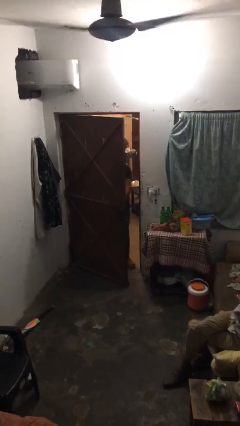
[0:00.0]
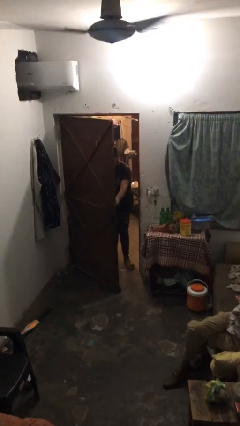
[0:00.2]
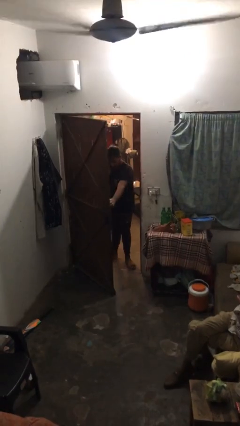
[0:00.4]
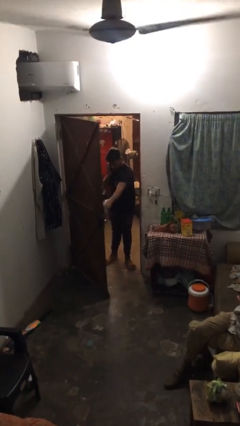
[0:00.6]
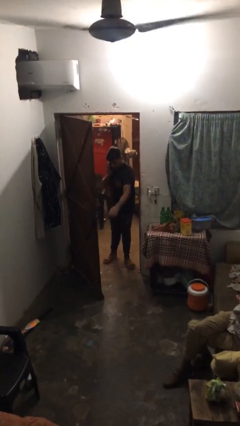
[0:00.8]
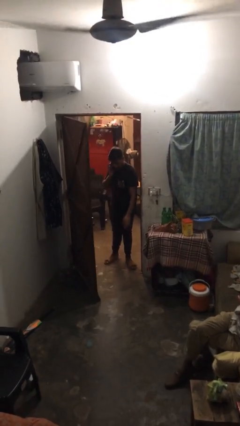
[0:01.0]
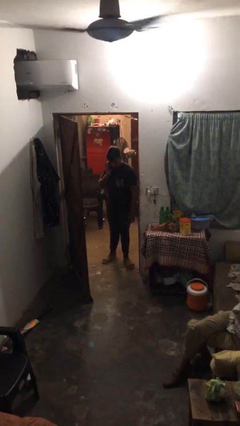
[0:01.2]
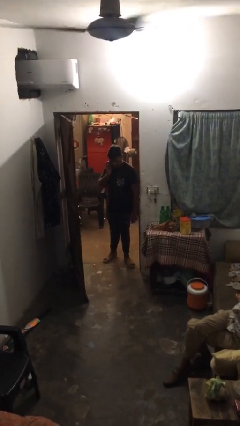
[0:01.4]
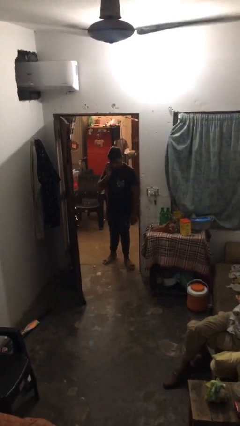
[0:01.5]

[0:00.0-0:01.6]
person opens facility door

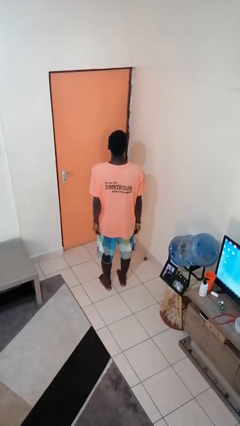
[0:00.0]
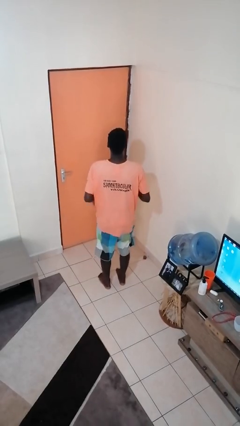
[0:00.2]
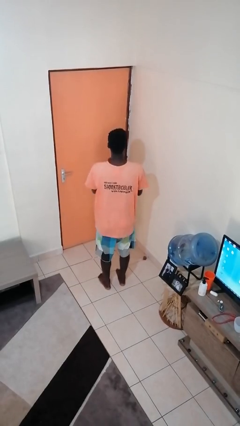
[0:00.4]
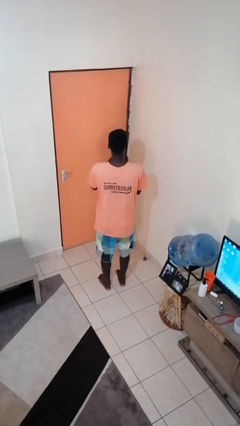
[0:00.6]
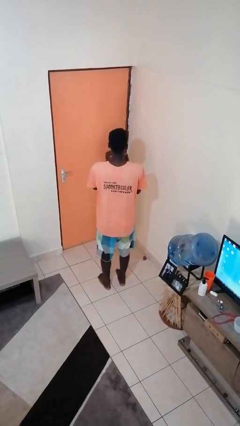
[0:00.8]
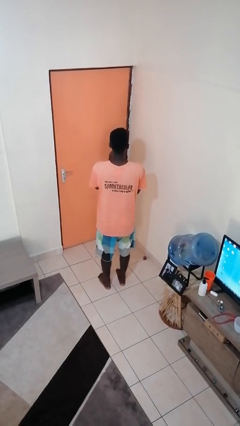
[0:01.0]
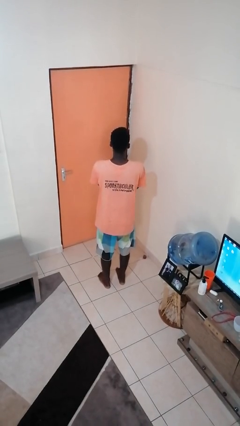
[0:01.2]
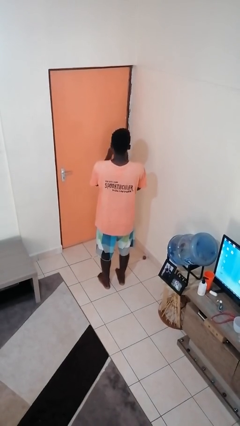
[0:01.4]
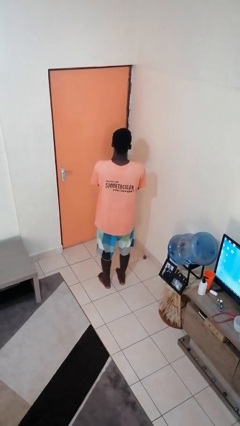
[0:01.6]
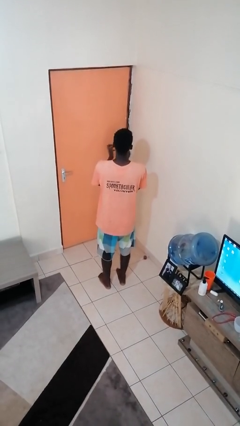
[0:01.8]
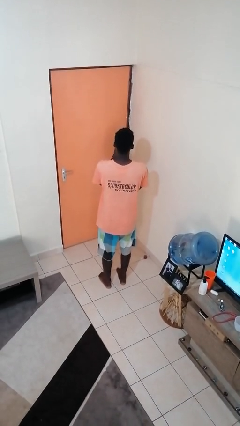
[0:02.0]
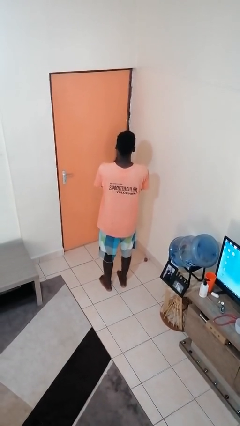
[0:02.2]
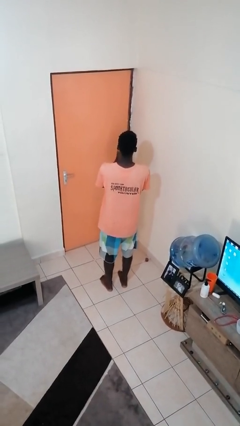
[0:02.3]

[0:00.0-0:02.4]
person claps hands

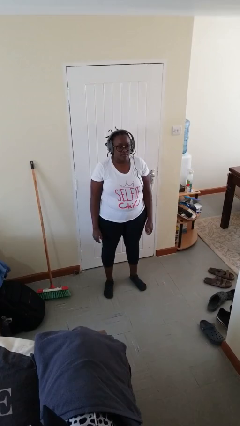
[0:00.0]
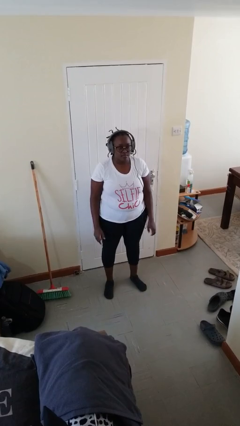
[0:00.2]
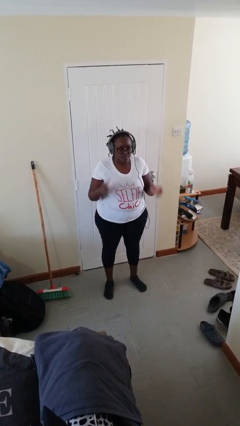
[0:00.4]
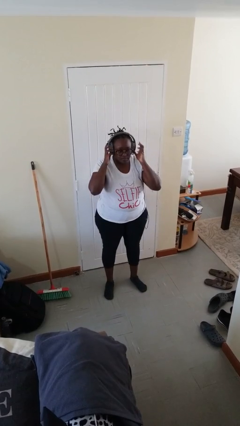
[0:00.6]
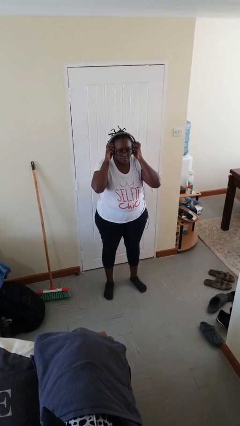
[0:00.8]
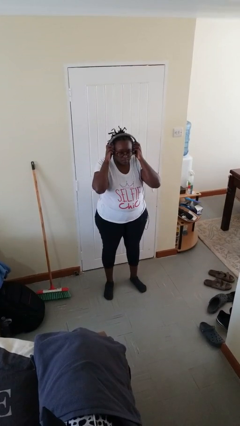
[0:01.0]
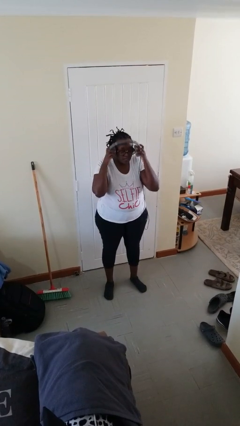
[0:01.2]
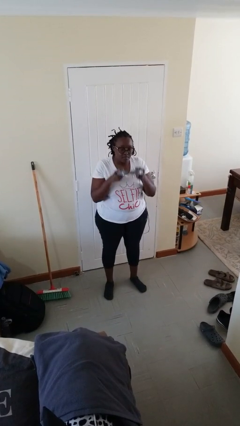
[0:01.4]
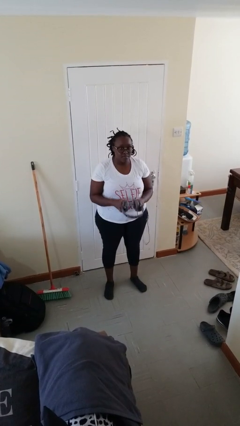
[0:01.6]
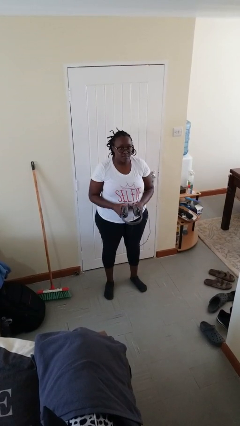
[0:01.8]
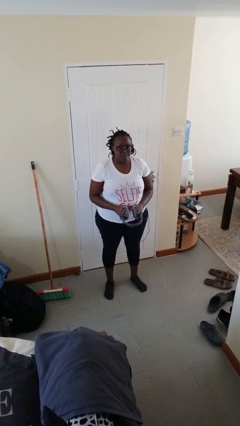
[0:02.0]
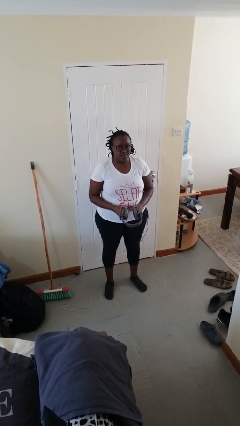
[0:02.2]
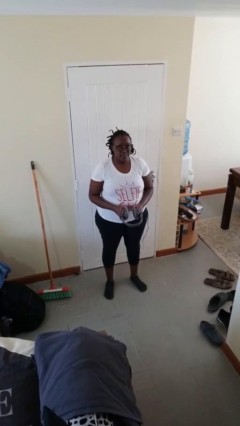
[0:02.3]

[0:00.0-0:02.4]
person takes off headphones

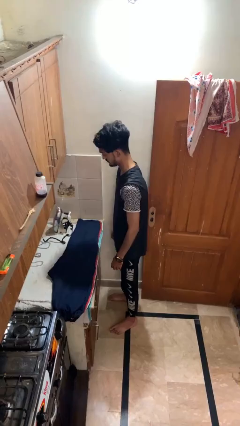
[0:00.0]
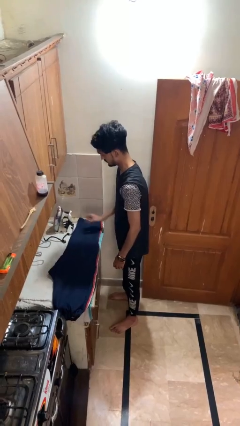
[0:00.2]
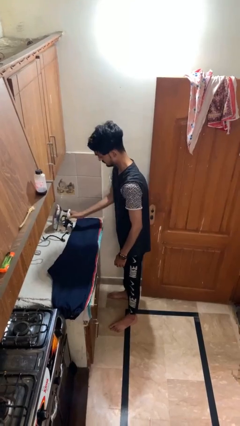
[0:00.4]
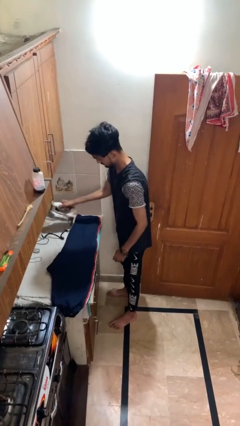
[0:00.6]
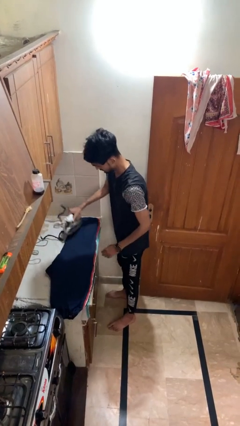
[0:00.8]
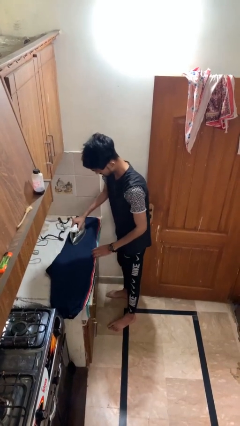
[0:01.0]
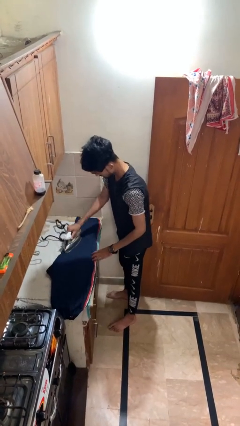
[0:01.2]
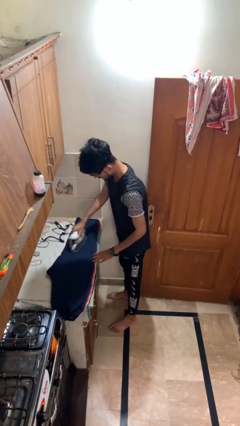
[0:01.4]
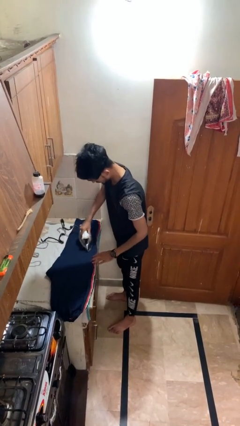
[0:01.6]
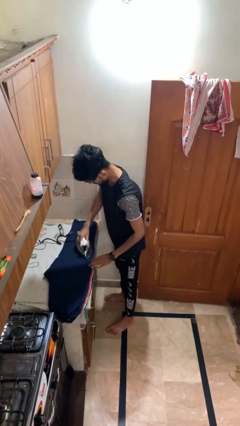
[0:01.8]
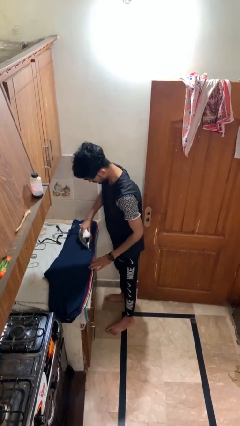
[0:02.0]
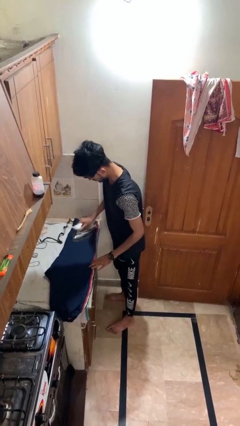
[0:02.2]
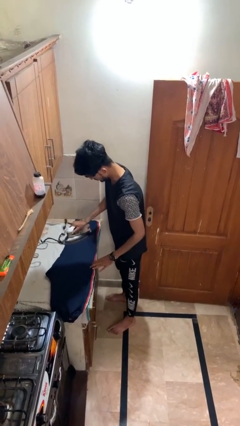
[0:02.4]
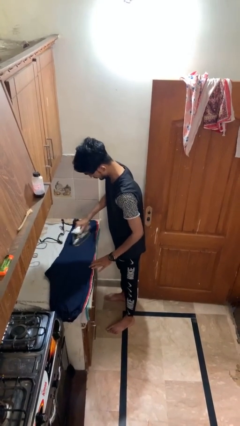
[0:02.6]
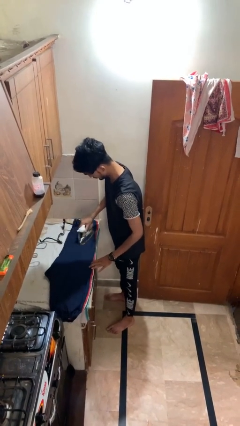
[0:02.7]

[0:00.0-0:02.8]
person irons clothes

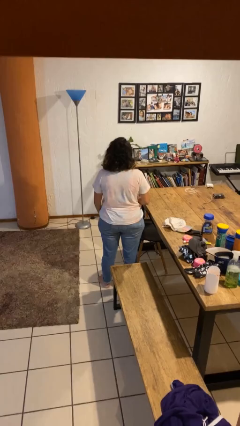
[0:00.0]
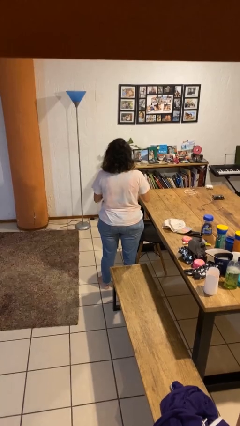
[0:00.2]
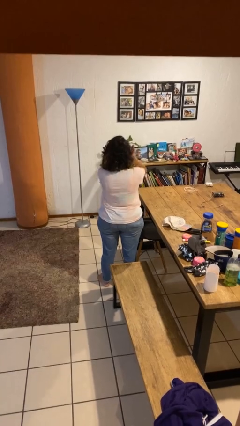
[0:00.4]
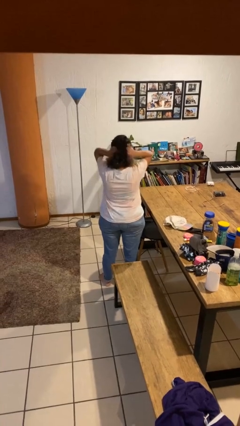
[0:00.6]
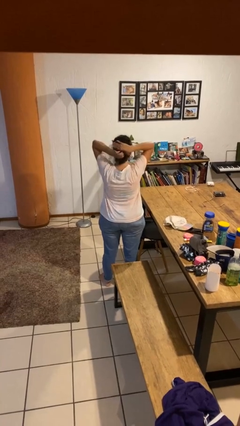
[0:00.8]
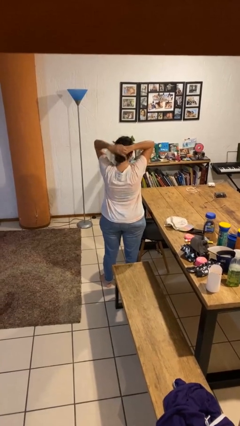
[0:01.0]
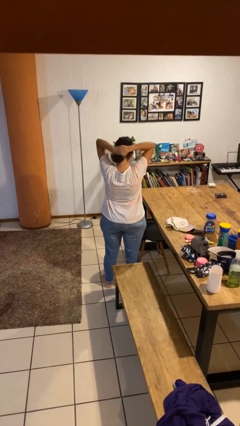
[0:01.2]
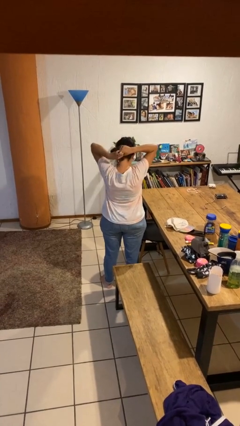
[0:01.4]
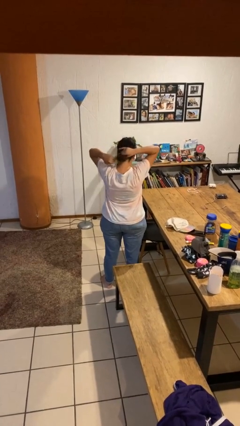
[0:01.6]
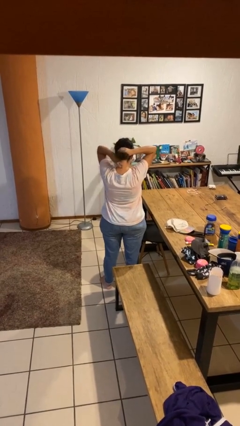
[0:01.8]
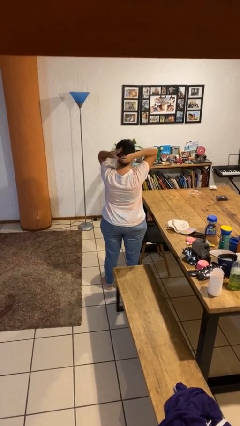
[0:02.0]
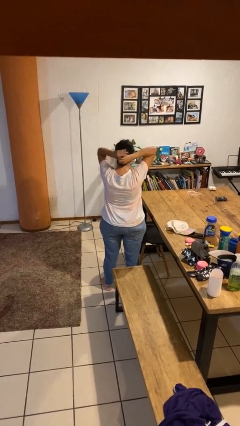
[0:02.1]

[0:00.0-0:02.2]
person puts hair in ponytail

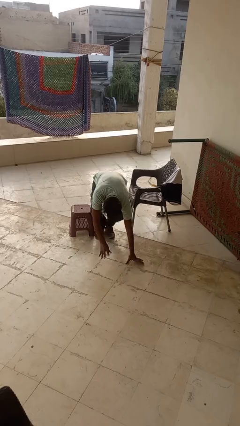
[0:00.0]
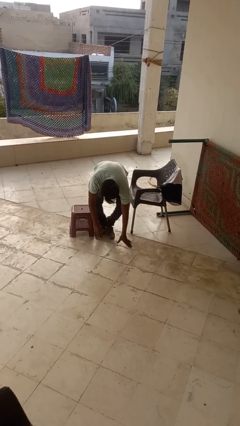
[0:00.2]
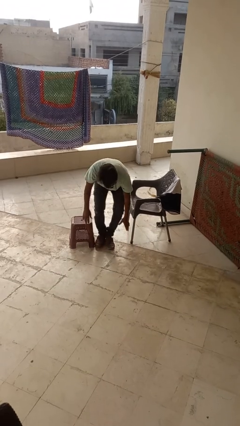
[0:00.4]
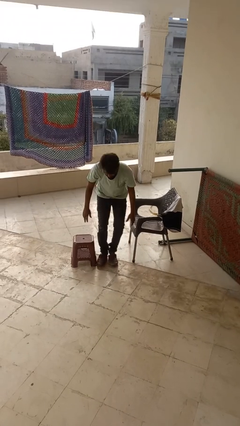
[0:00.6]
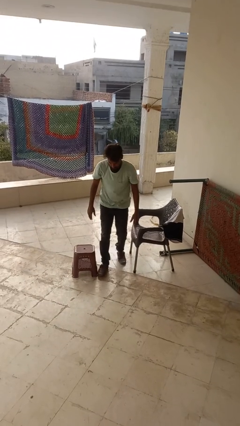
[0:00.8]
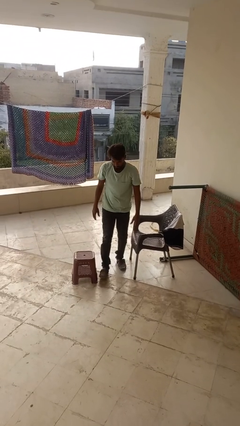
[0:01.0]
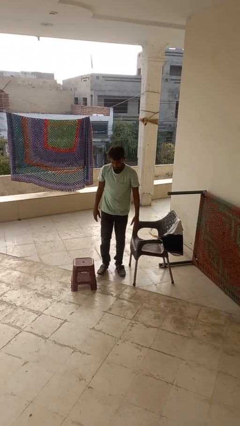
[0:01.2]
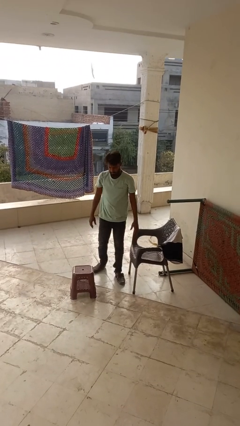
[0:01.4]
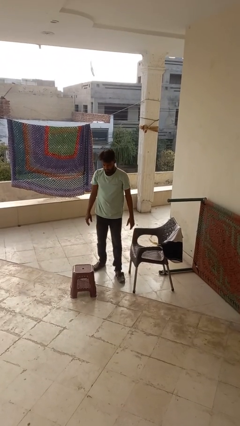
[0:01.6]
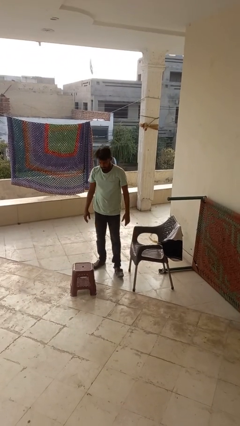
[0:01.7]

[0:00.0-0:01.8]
person stands up from floor

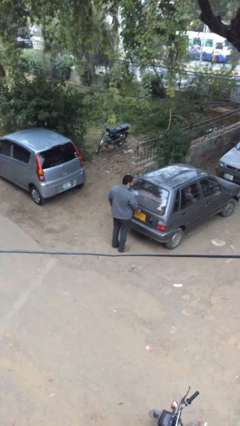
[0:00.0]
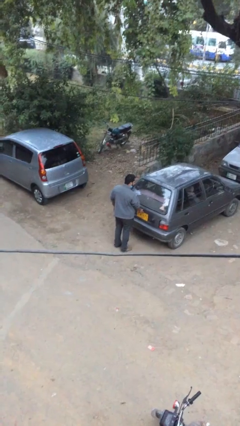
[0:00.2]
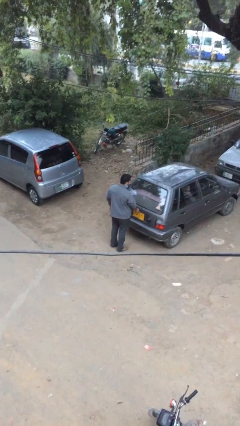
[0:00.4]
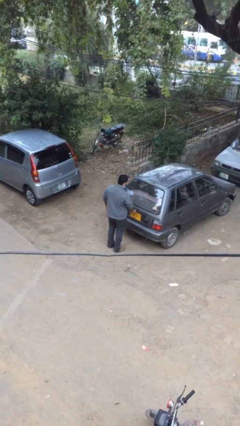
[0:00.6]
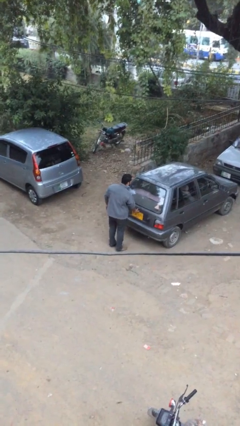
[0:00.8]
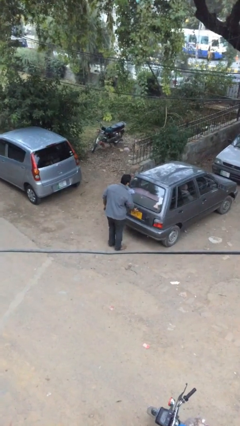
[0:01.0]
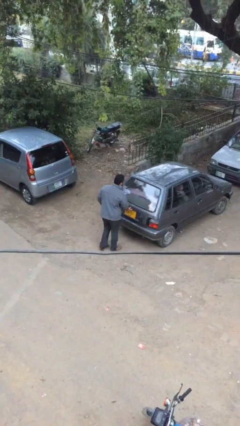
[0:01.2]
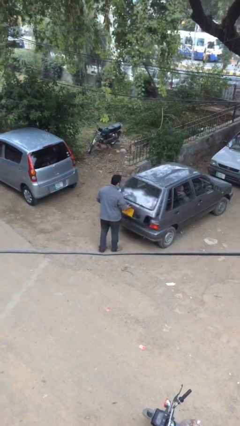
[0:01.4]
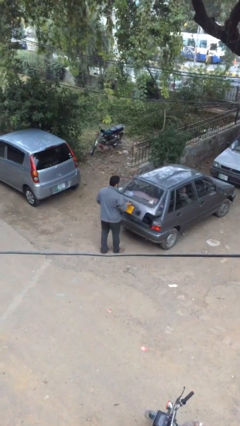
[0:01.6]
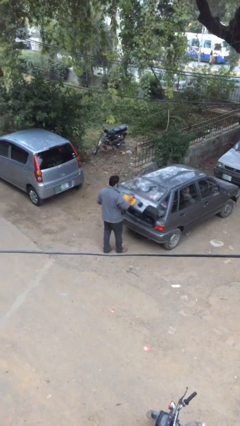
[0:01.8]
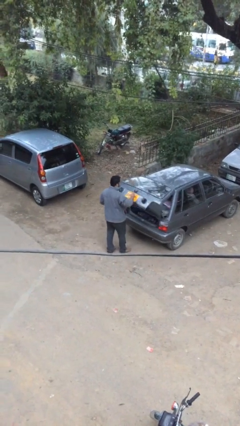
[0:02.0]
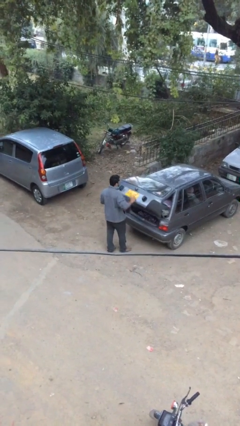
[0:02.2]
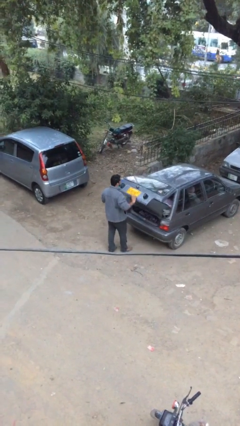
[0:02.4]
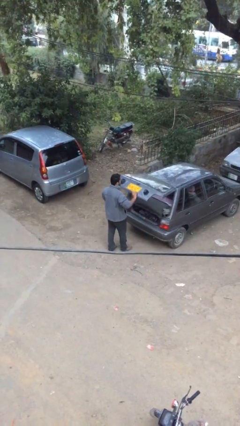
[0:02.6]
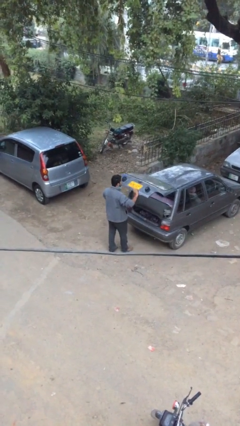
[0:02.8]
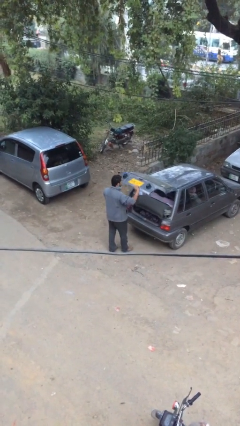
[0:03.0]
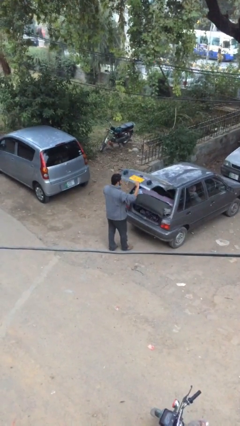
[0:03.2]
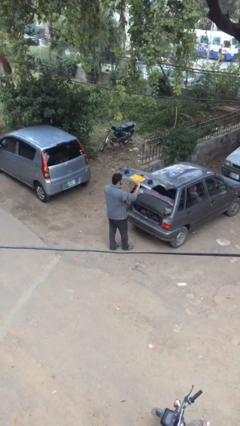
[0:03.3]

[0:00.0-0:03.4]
person opens car trunk

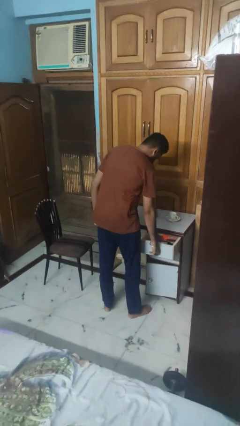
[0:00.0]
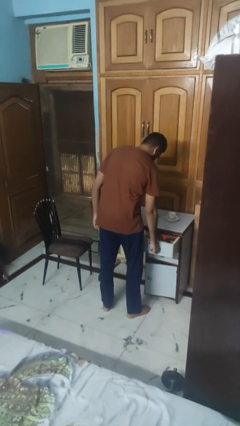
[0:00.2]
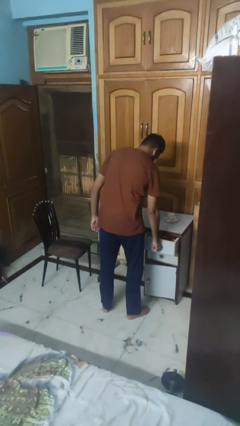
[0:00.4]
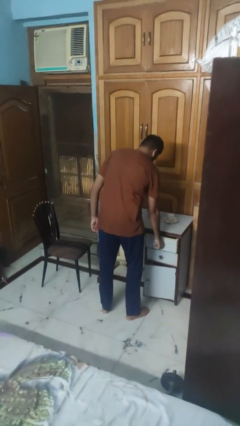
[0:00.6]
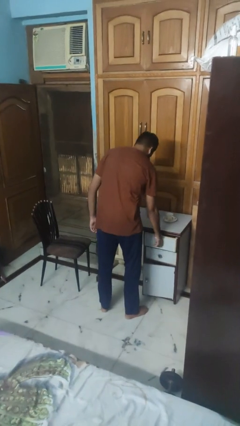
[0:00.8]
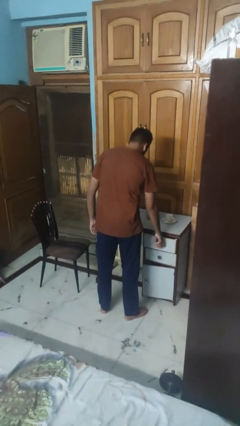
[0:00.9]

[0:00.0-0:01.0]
person closes kitchen drawer
